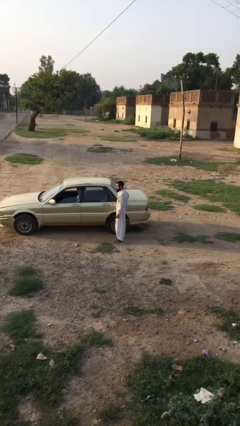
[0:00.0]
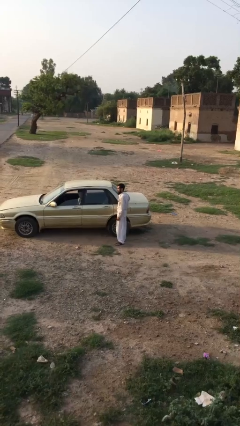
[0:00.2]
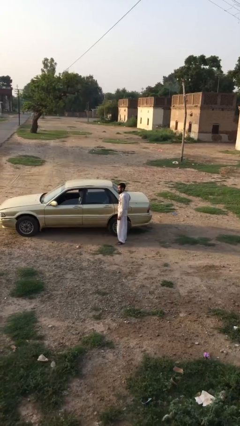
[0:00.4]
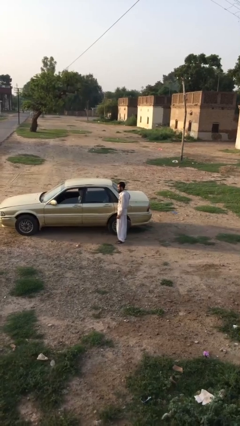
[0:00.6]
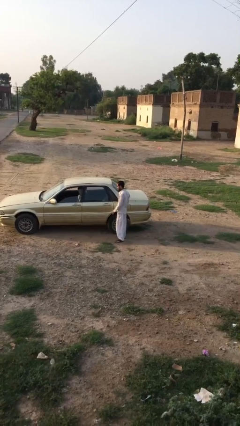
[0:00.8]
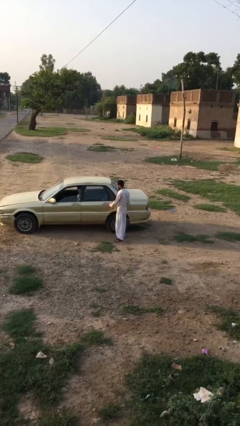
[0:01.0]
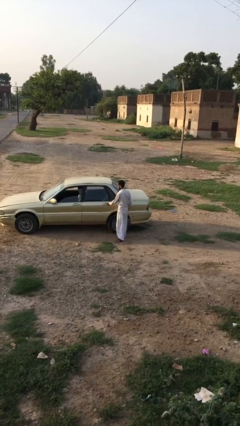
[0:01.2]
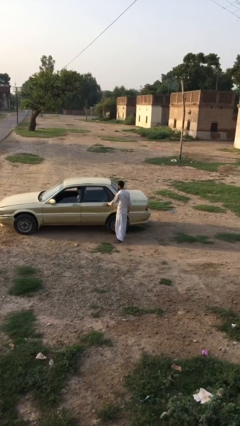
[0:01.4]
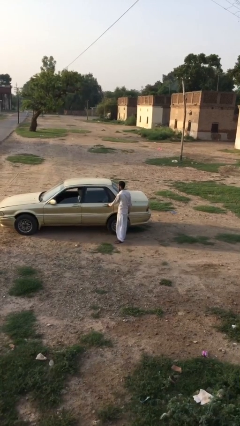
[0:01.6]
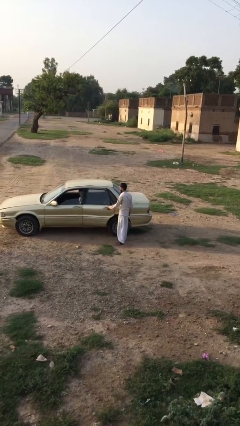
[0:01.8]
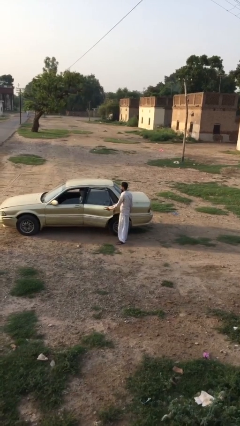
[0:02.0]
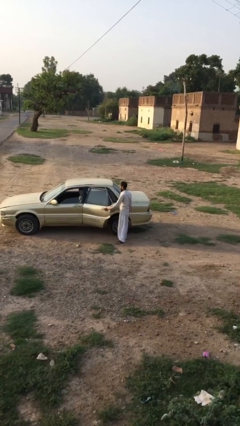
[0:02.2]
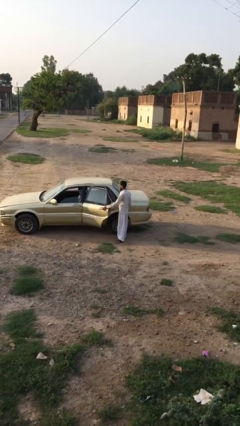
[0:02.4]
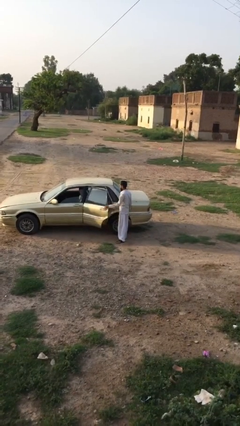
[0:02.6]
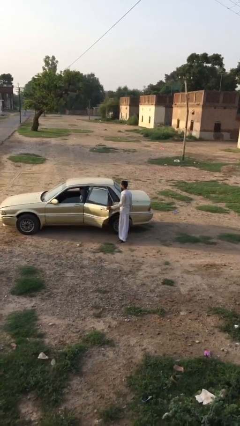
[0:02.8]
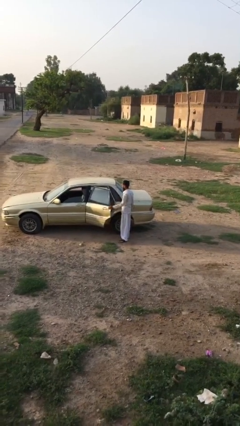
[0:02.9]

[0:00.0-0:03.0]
person opens car door

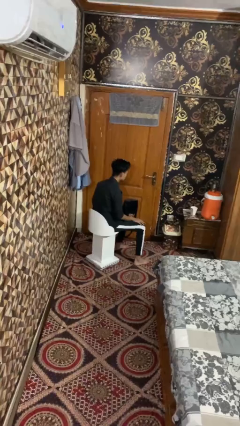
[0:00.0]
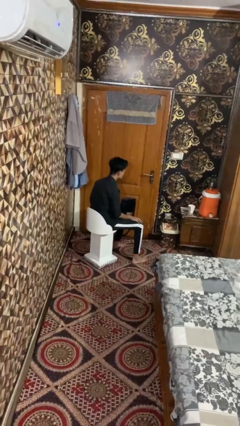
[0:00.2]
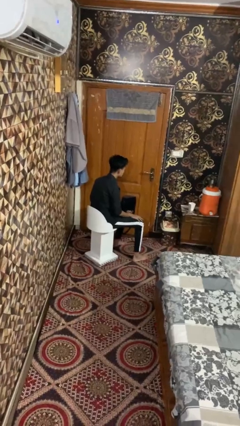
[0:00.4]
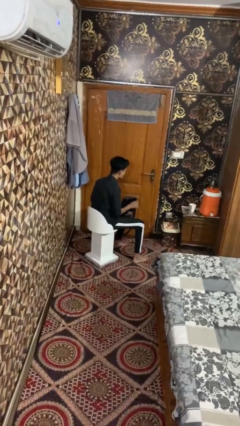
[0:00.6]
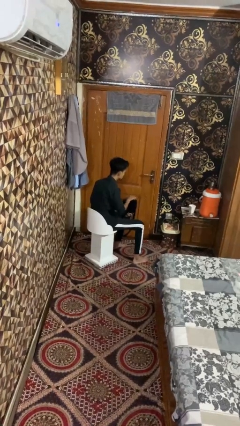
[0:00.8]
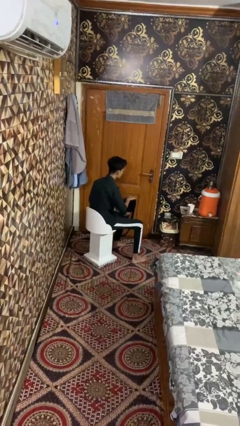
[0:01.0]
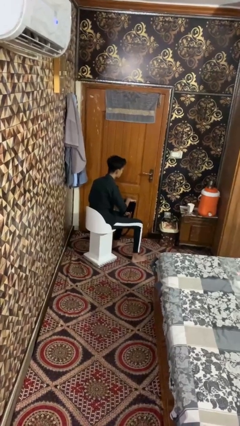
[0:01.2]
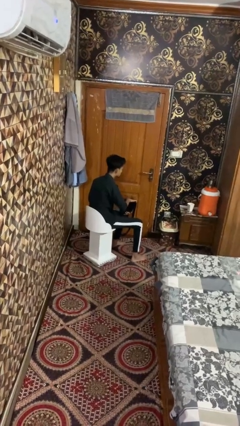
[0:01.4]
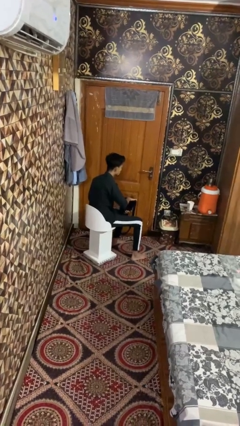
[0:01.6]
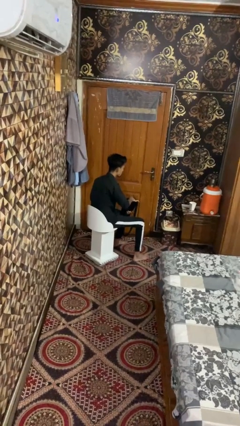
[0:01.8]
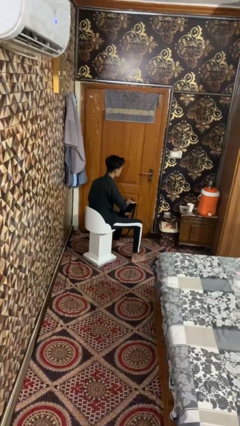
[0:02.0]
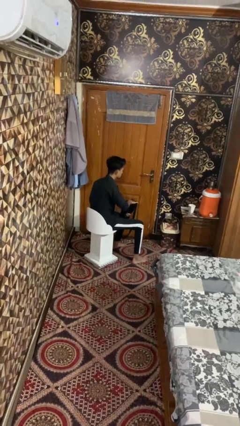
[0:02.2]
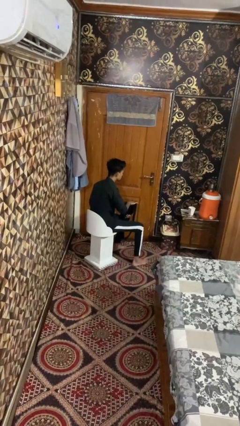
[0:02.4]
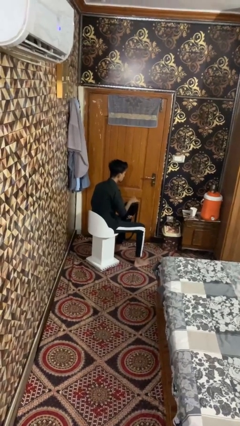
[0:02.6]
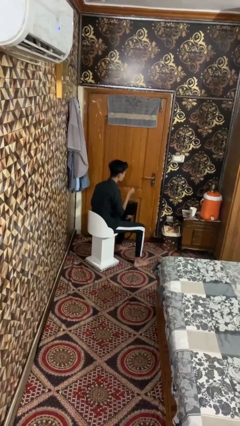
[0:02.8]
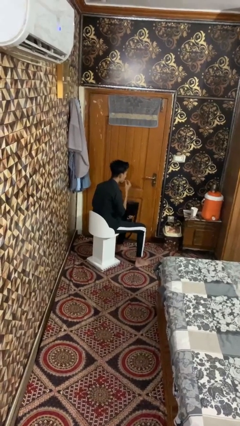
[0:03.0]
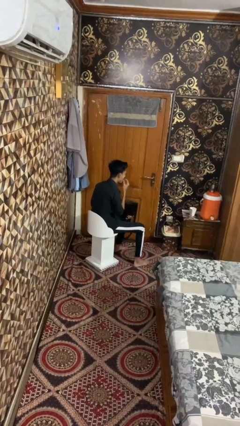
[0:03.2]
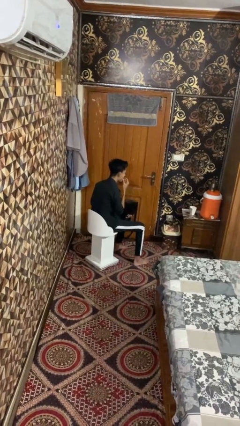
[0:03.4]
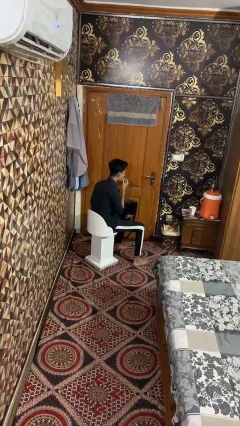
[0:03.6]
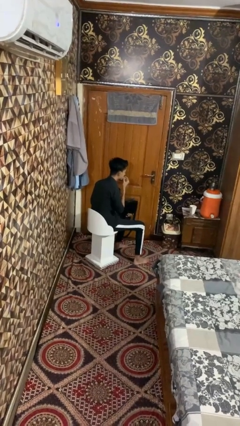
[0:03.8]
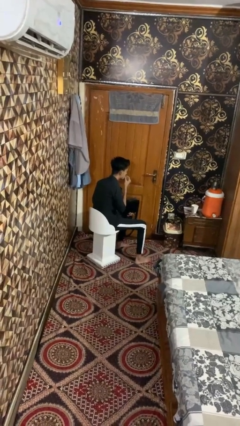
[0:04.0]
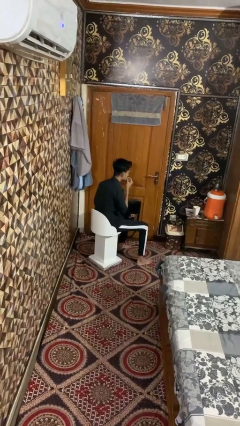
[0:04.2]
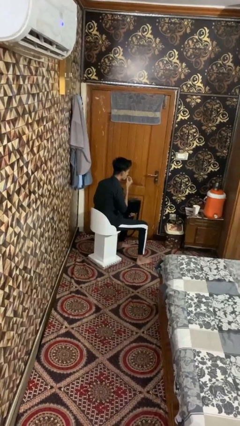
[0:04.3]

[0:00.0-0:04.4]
person eats snack from bag

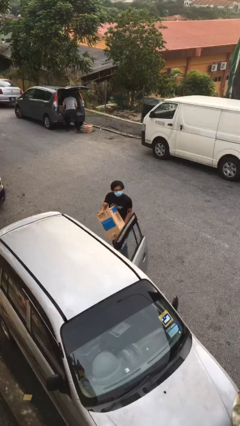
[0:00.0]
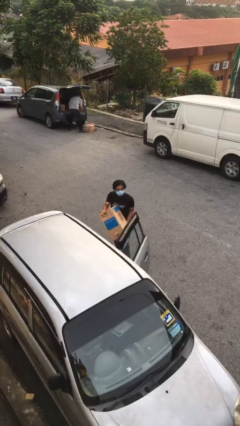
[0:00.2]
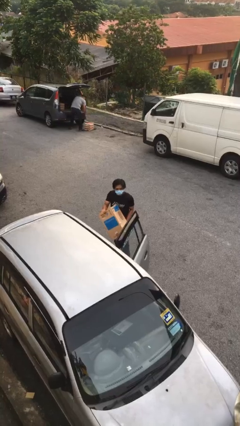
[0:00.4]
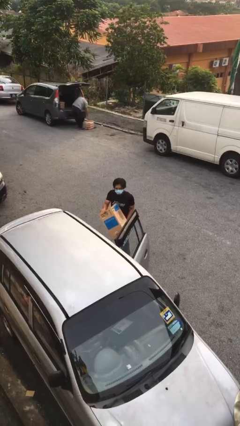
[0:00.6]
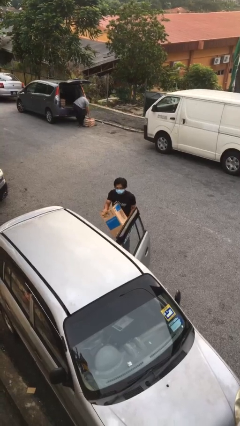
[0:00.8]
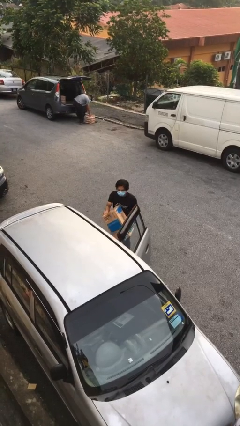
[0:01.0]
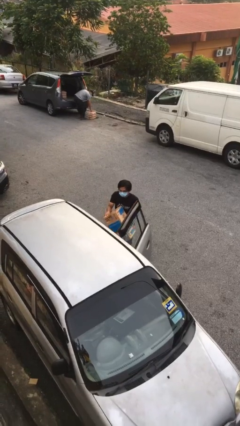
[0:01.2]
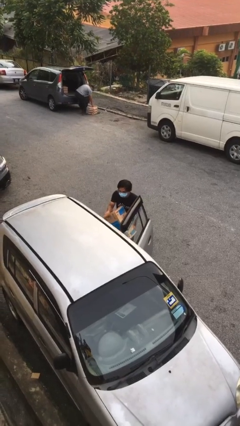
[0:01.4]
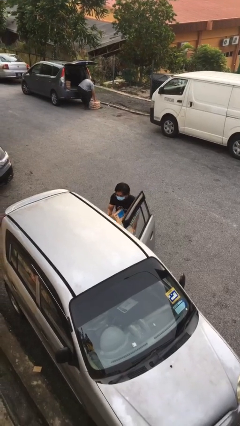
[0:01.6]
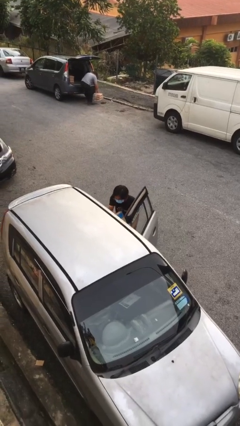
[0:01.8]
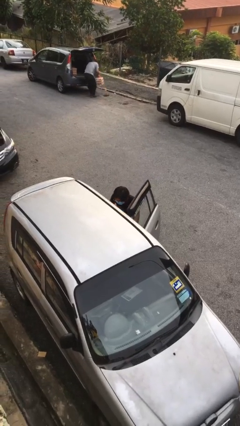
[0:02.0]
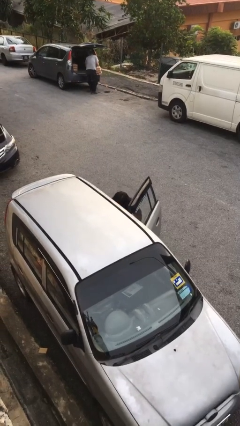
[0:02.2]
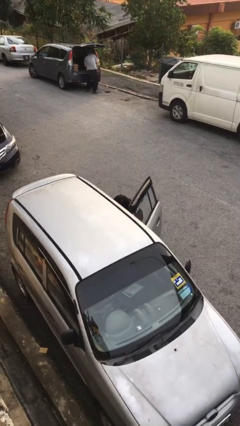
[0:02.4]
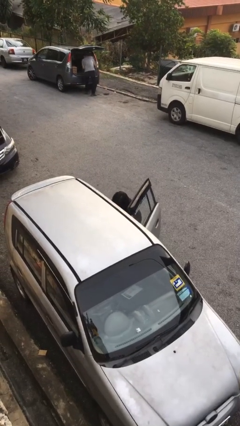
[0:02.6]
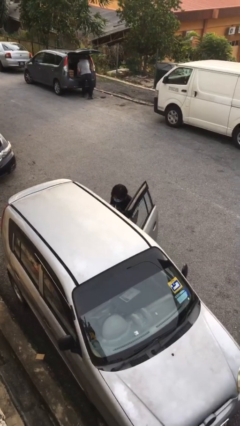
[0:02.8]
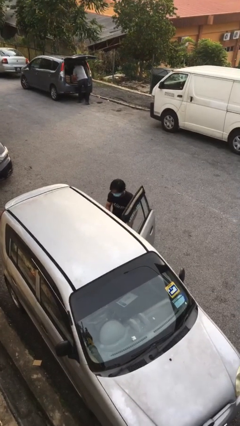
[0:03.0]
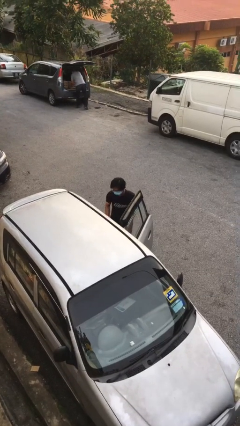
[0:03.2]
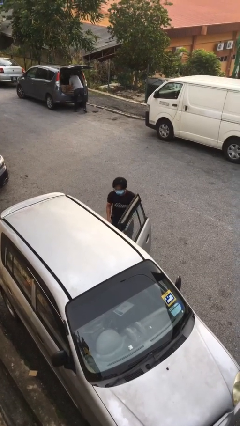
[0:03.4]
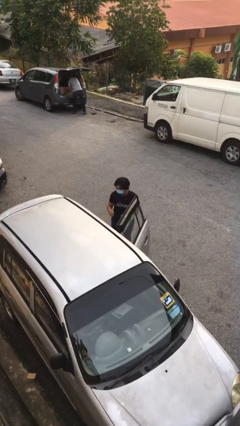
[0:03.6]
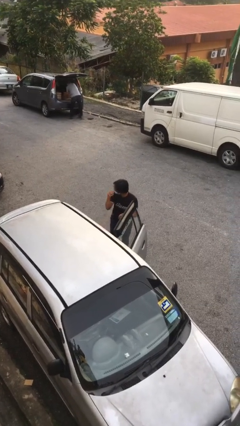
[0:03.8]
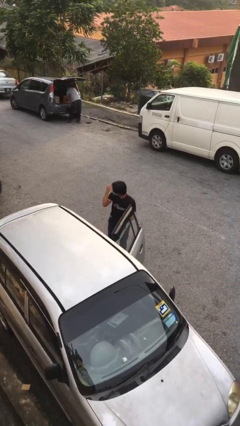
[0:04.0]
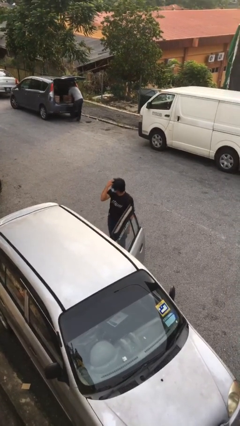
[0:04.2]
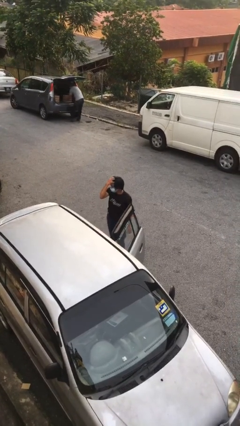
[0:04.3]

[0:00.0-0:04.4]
person loads car

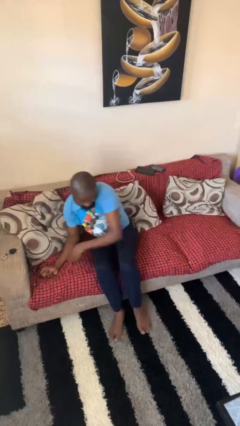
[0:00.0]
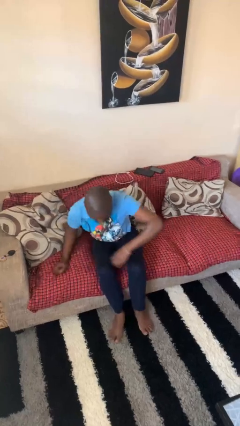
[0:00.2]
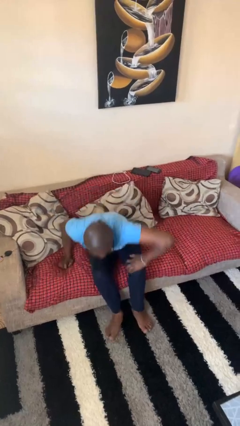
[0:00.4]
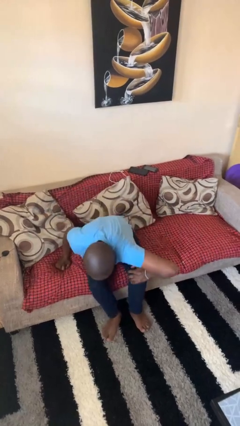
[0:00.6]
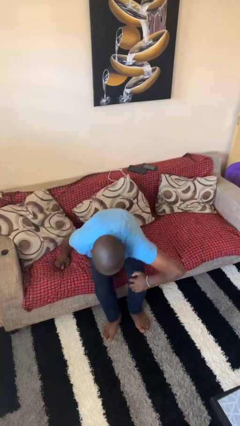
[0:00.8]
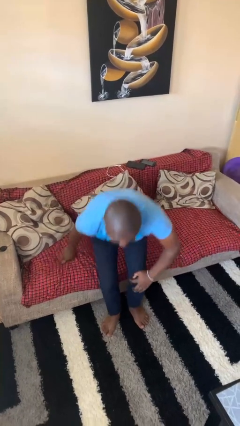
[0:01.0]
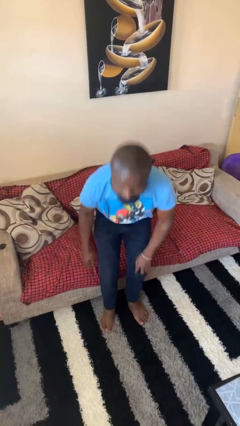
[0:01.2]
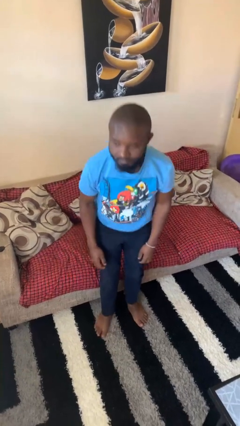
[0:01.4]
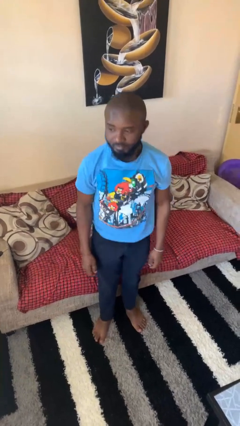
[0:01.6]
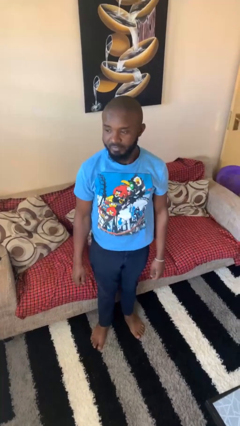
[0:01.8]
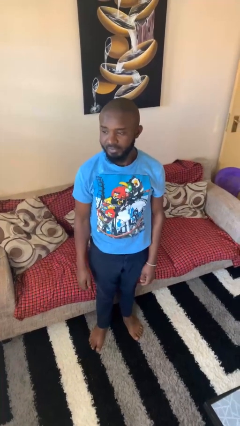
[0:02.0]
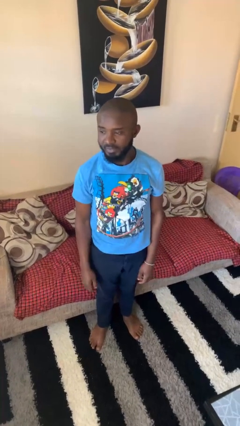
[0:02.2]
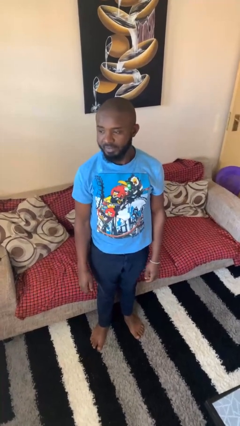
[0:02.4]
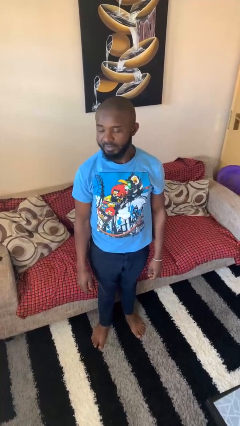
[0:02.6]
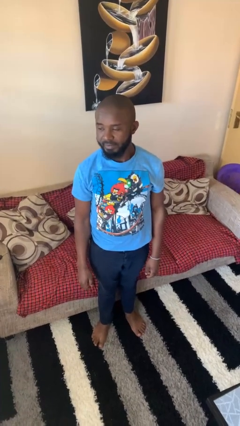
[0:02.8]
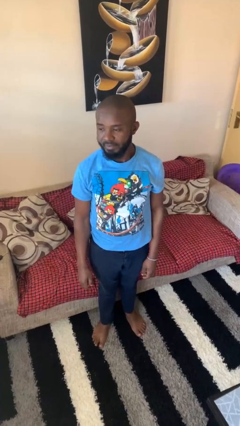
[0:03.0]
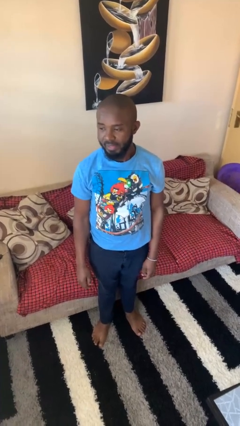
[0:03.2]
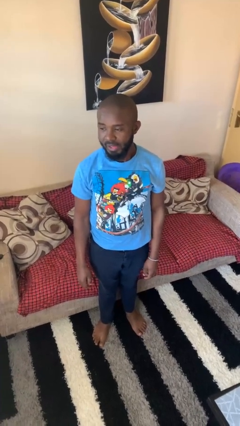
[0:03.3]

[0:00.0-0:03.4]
person stands up

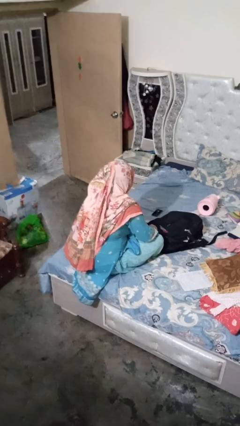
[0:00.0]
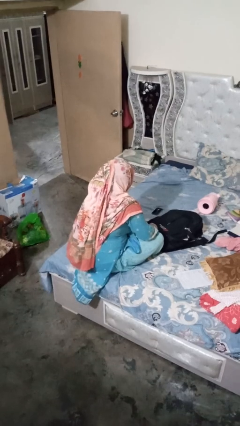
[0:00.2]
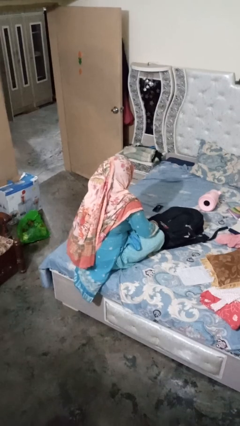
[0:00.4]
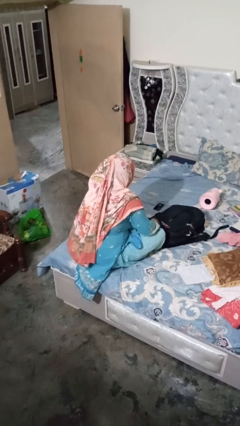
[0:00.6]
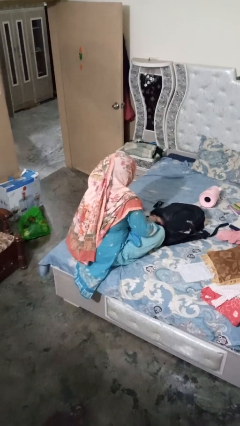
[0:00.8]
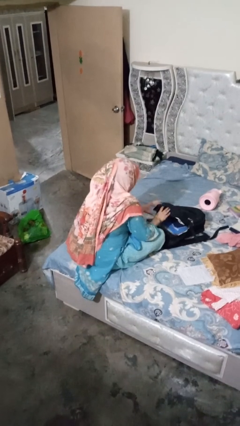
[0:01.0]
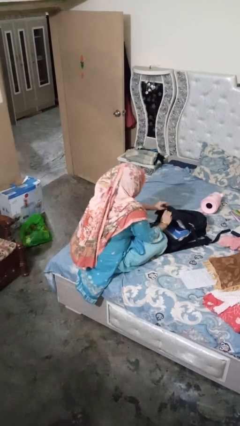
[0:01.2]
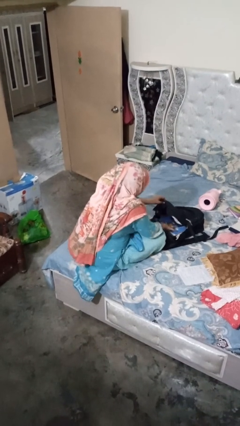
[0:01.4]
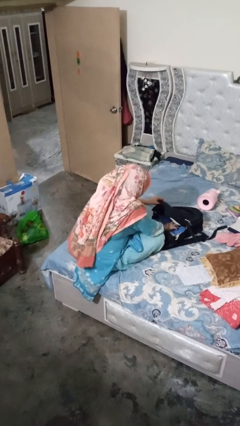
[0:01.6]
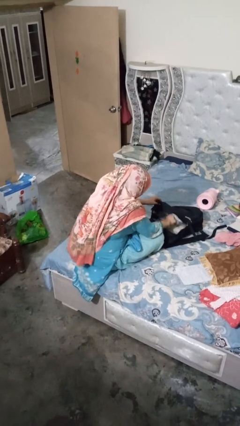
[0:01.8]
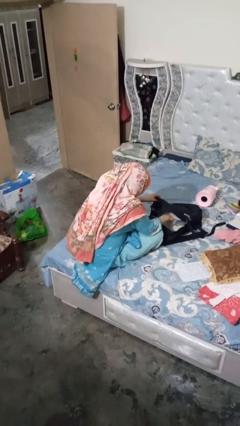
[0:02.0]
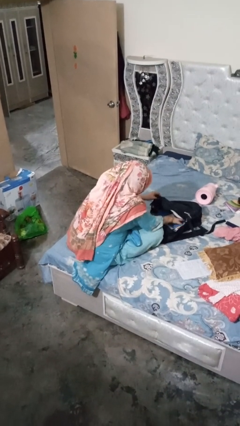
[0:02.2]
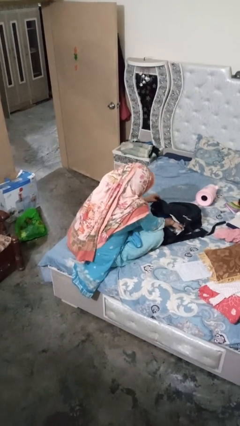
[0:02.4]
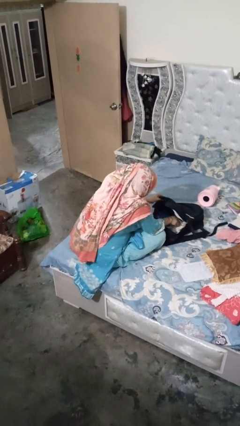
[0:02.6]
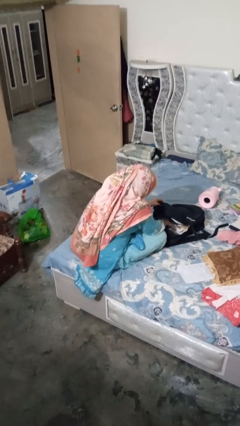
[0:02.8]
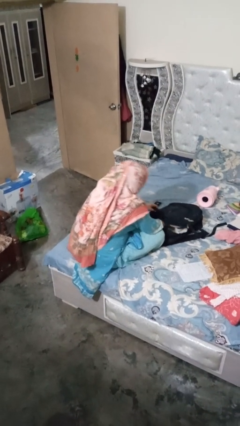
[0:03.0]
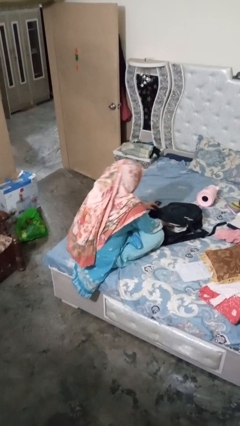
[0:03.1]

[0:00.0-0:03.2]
person searches in bag
